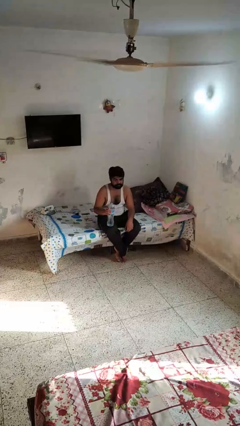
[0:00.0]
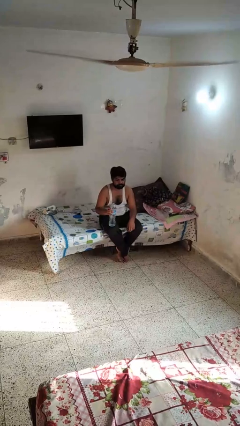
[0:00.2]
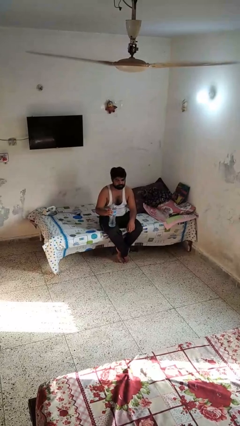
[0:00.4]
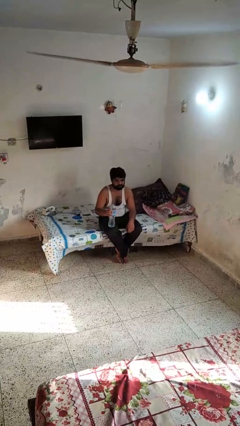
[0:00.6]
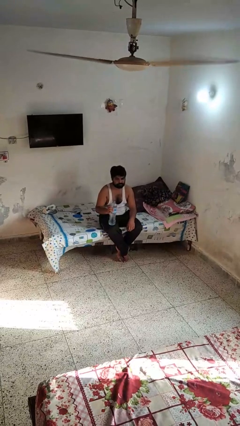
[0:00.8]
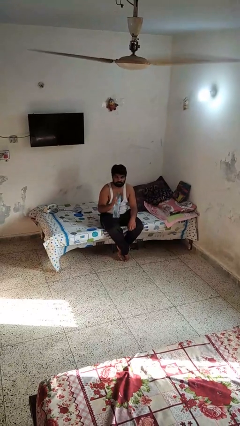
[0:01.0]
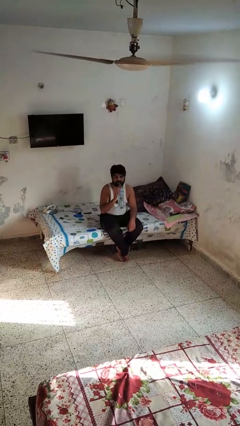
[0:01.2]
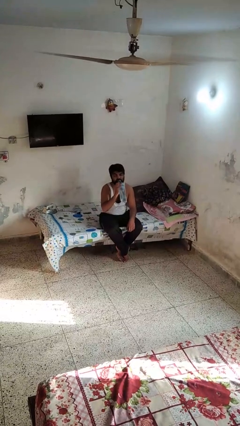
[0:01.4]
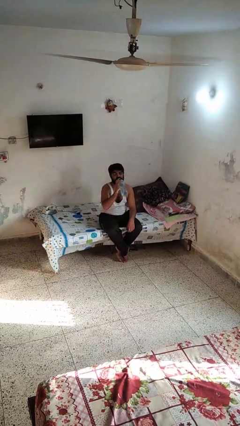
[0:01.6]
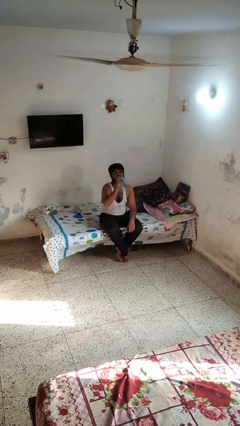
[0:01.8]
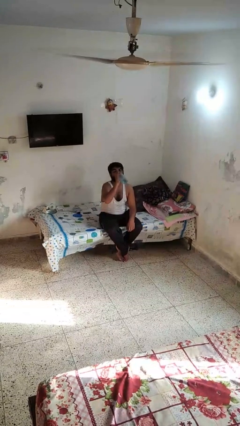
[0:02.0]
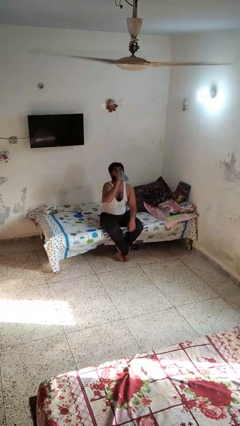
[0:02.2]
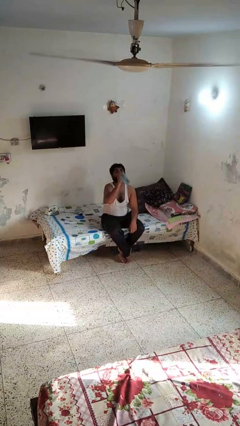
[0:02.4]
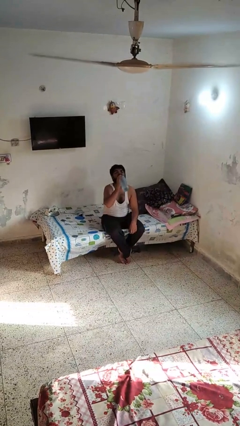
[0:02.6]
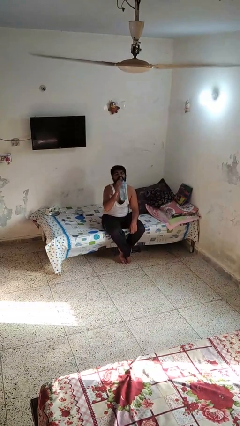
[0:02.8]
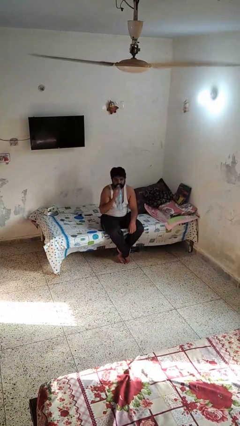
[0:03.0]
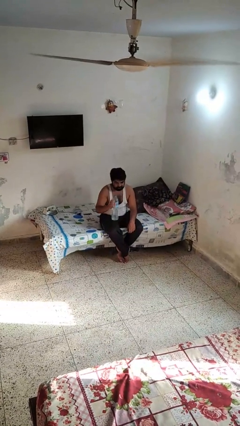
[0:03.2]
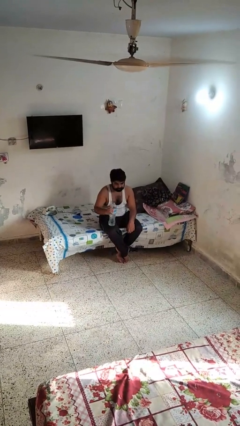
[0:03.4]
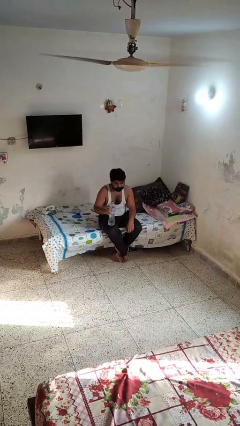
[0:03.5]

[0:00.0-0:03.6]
person drinks from bottle

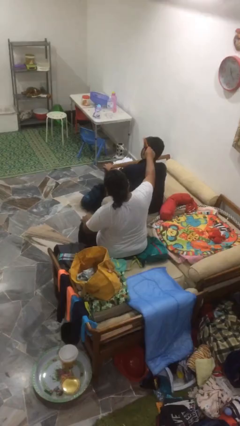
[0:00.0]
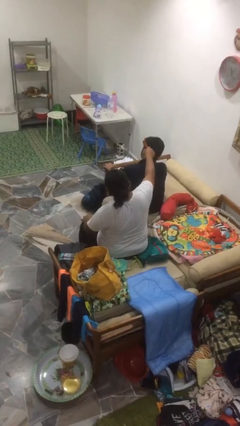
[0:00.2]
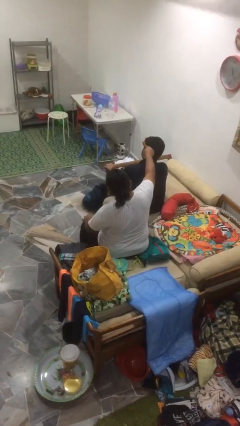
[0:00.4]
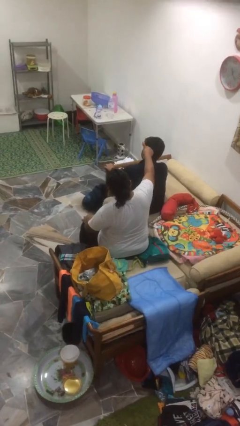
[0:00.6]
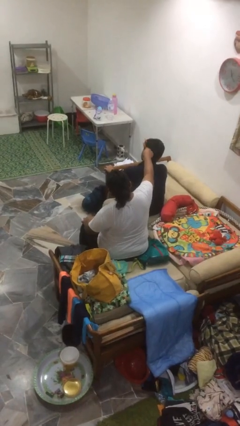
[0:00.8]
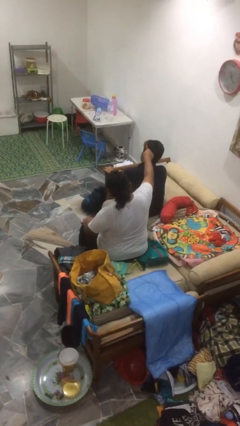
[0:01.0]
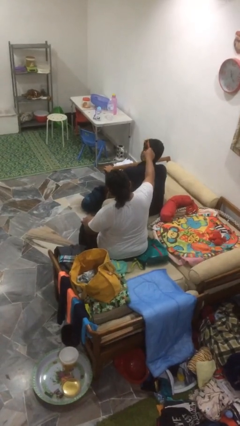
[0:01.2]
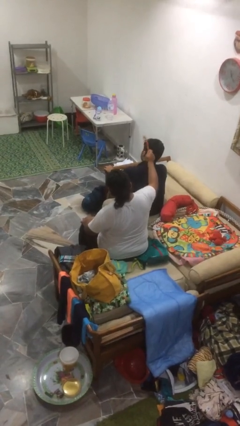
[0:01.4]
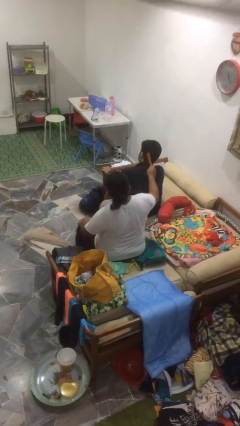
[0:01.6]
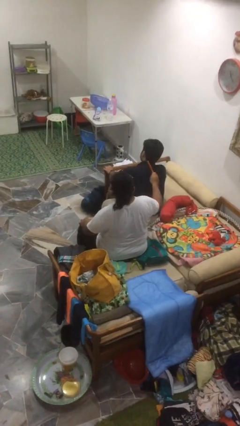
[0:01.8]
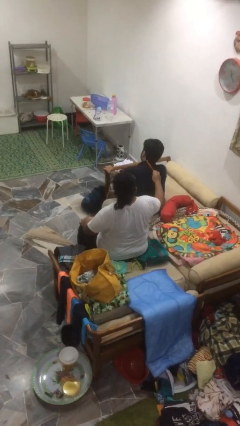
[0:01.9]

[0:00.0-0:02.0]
person brushes hair of person

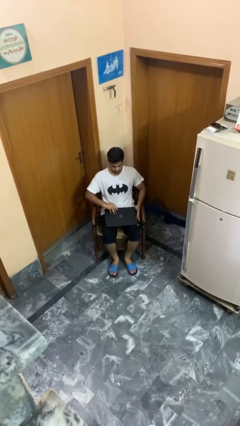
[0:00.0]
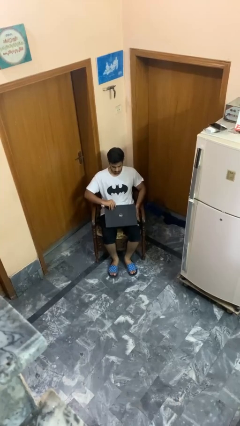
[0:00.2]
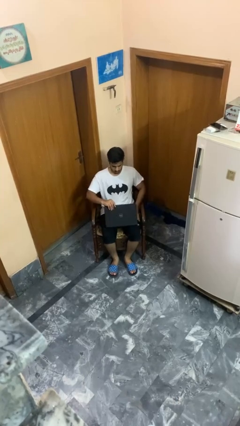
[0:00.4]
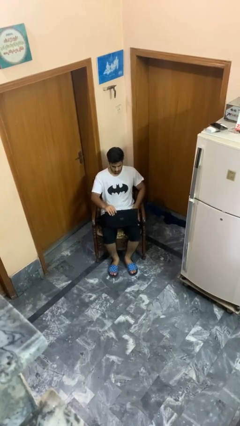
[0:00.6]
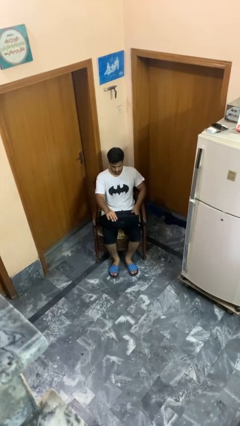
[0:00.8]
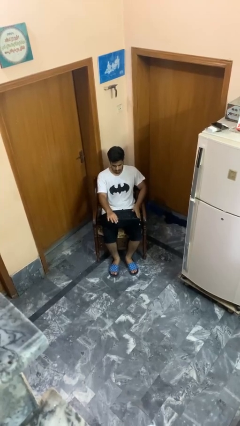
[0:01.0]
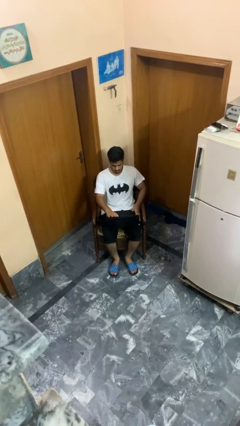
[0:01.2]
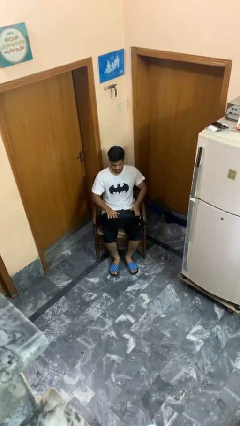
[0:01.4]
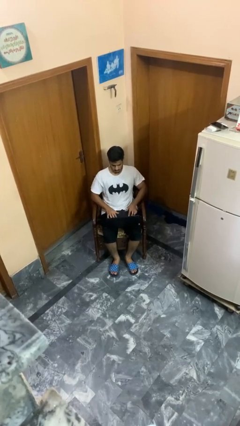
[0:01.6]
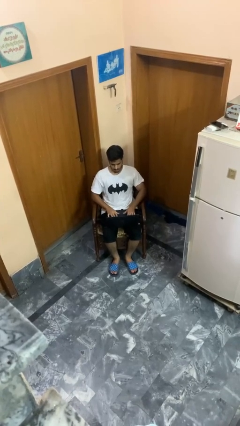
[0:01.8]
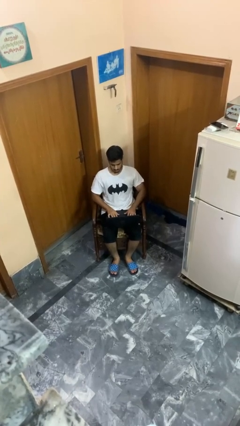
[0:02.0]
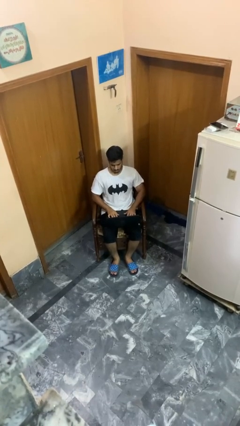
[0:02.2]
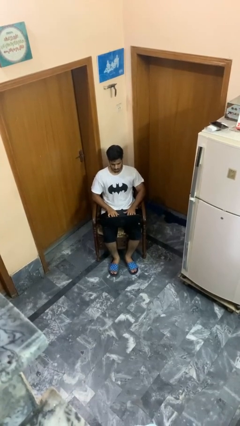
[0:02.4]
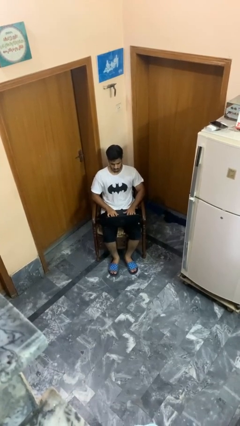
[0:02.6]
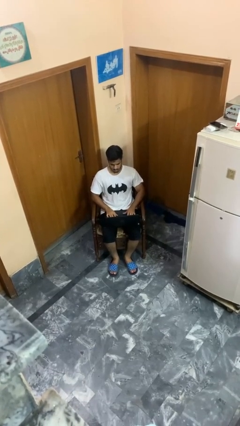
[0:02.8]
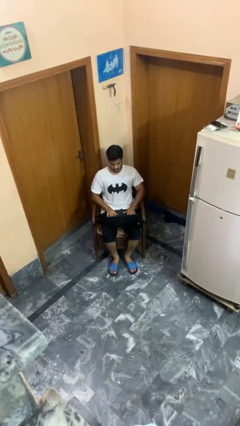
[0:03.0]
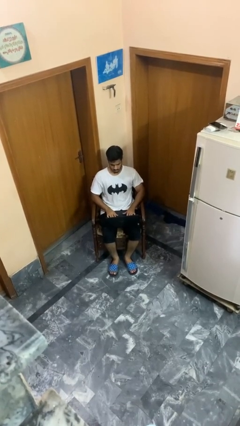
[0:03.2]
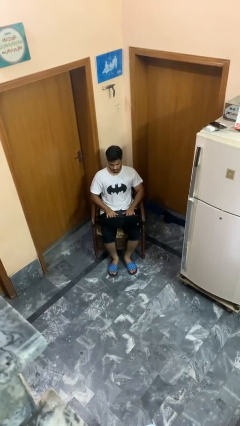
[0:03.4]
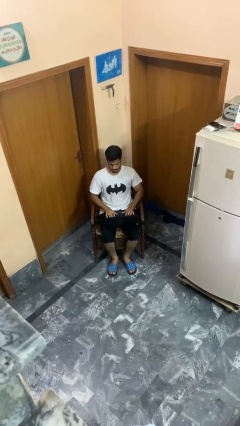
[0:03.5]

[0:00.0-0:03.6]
person opens laptop

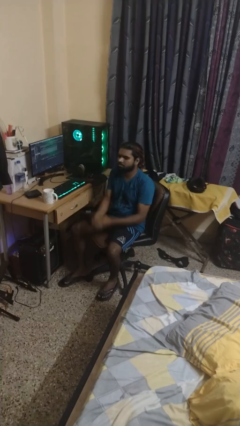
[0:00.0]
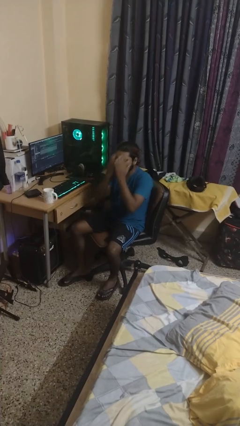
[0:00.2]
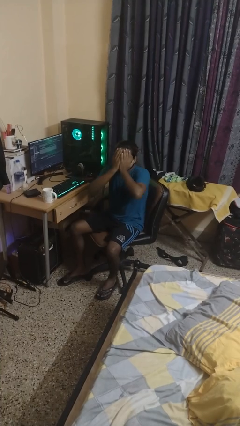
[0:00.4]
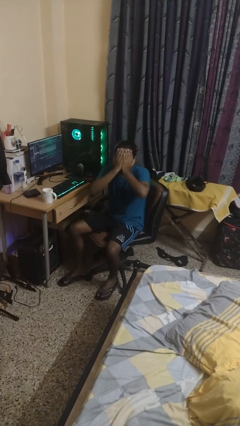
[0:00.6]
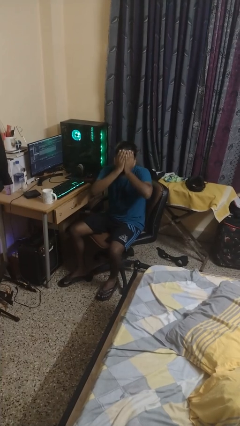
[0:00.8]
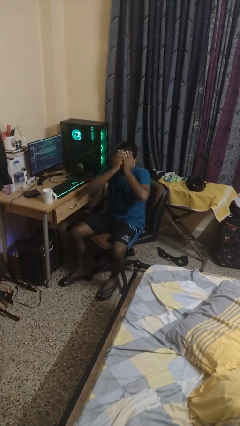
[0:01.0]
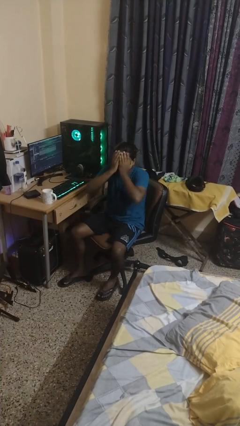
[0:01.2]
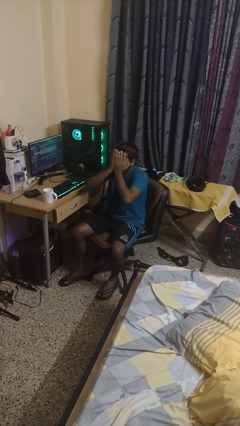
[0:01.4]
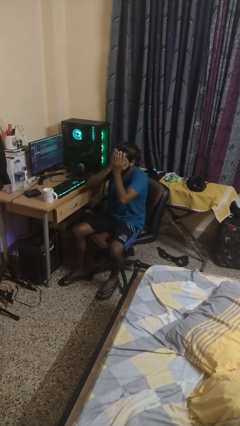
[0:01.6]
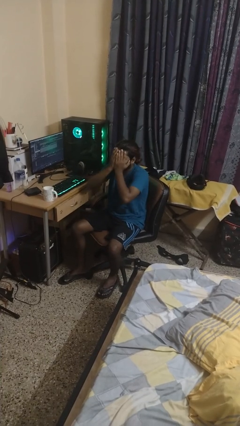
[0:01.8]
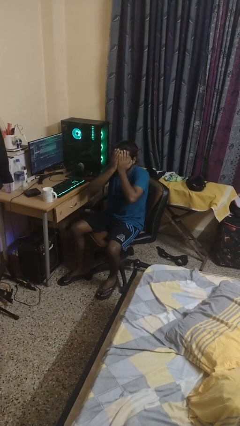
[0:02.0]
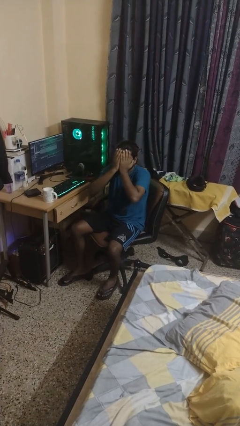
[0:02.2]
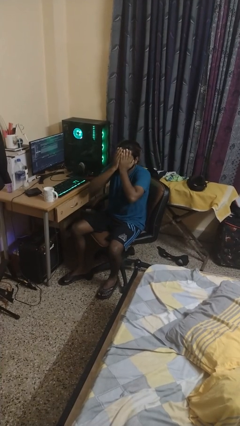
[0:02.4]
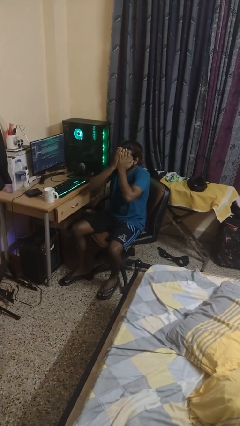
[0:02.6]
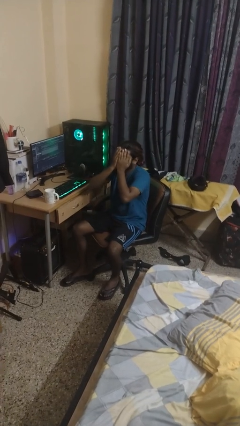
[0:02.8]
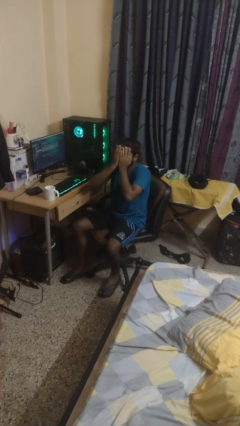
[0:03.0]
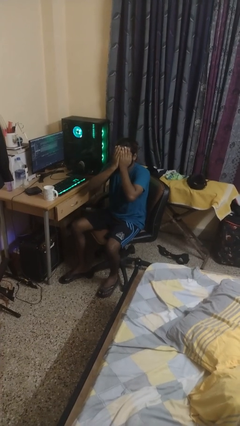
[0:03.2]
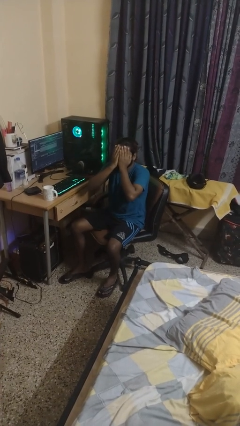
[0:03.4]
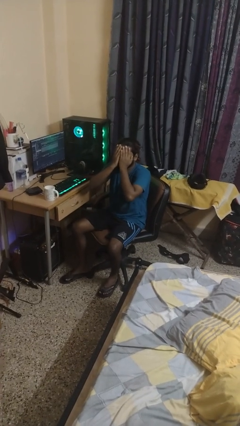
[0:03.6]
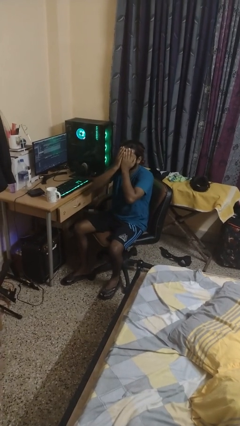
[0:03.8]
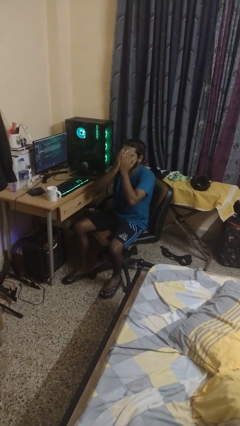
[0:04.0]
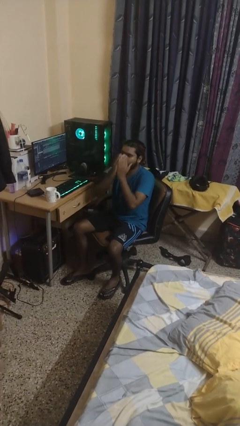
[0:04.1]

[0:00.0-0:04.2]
person covers face with hands

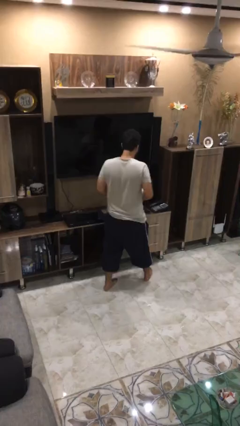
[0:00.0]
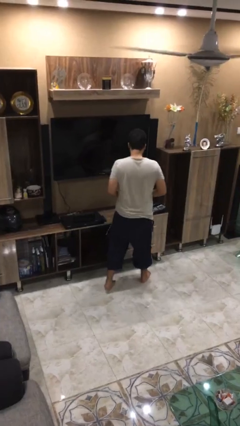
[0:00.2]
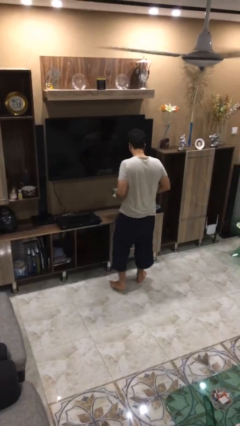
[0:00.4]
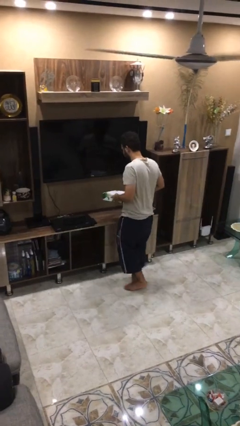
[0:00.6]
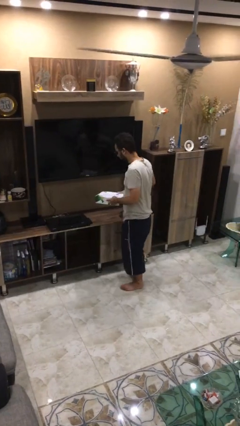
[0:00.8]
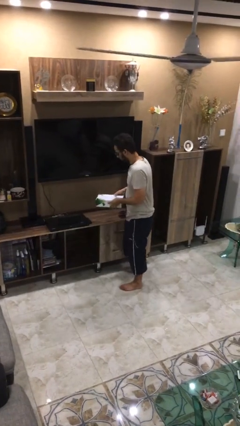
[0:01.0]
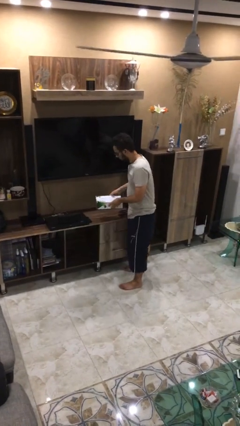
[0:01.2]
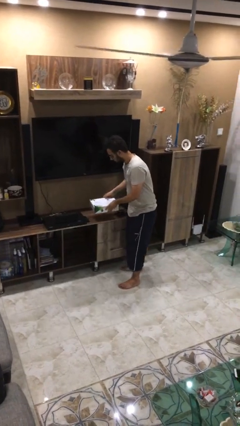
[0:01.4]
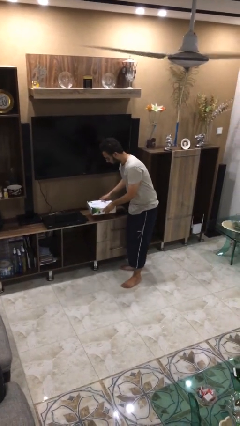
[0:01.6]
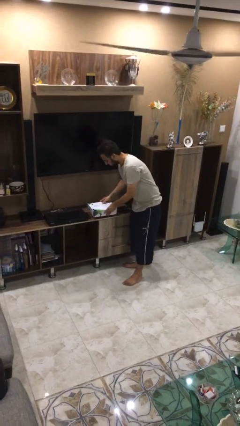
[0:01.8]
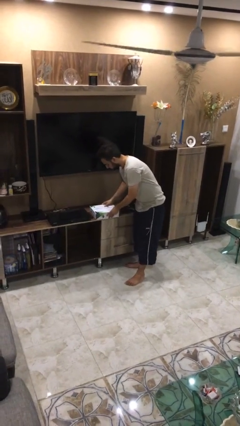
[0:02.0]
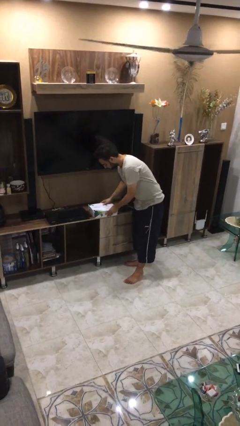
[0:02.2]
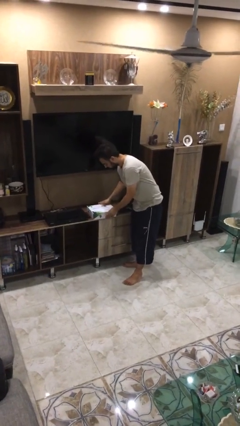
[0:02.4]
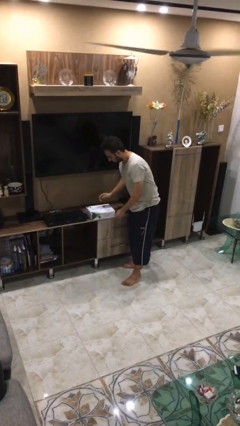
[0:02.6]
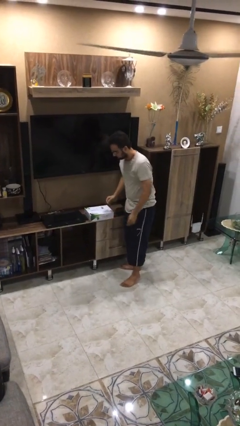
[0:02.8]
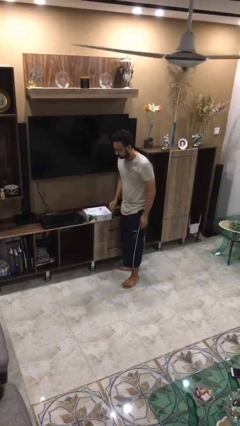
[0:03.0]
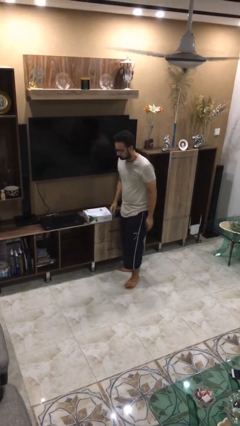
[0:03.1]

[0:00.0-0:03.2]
person puts down object on table

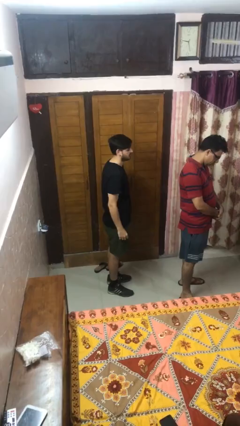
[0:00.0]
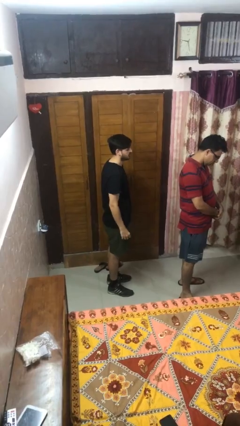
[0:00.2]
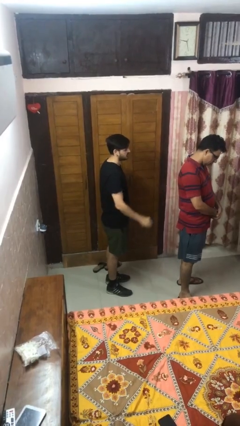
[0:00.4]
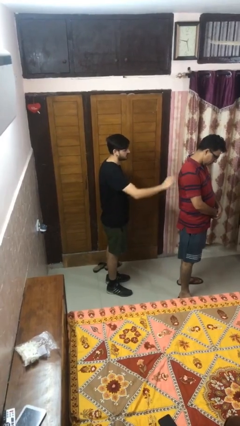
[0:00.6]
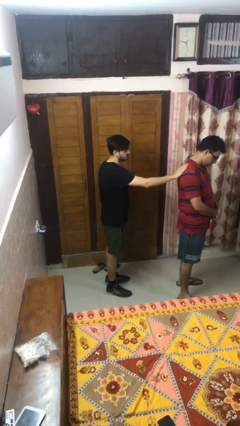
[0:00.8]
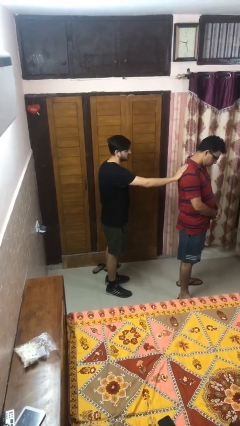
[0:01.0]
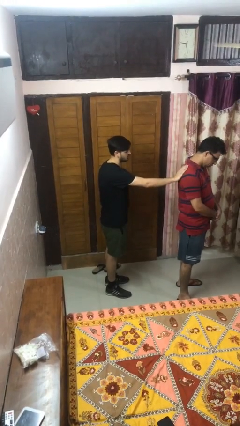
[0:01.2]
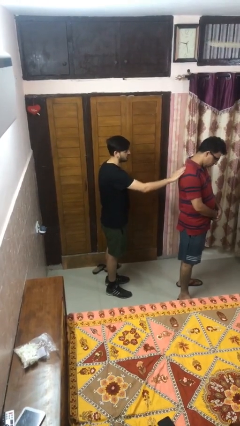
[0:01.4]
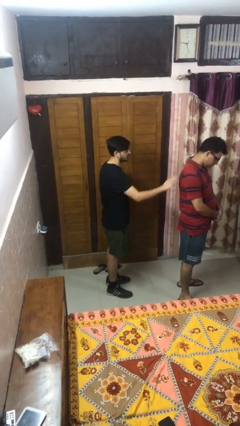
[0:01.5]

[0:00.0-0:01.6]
person touches back of person
